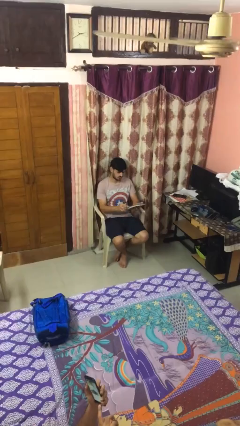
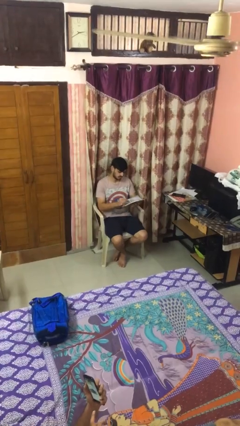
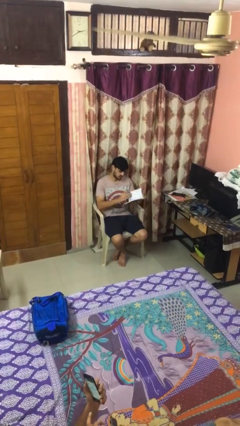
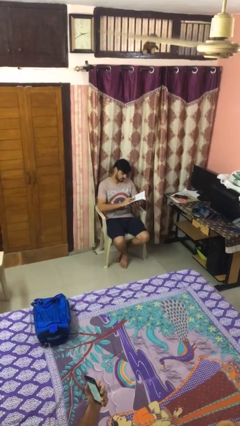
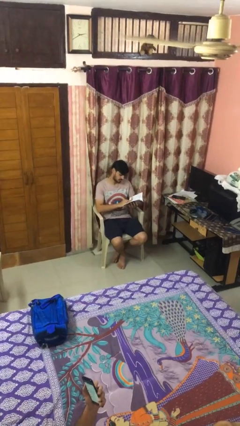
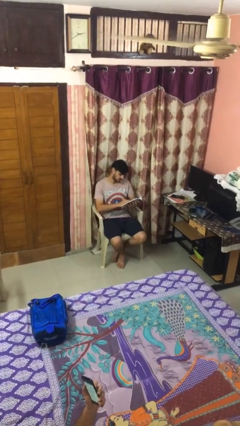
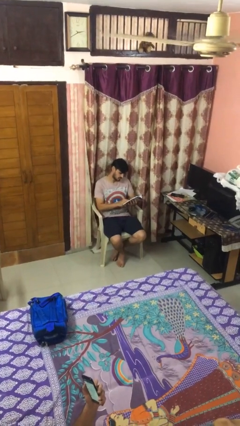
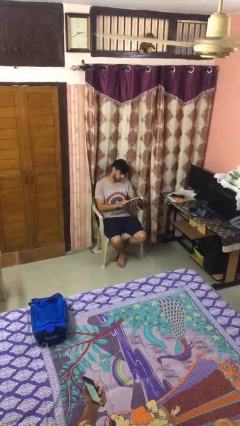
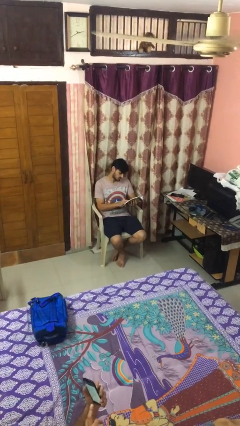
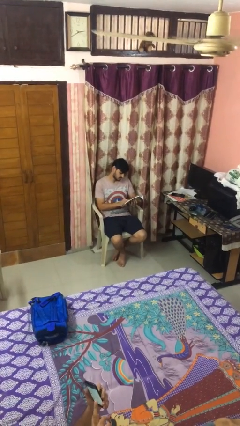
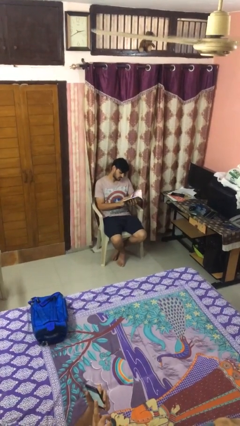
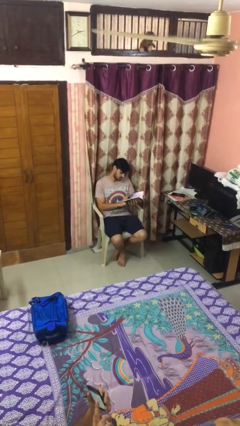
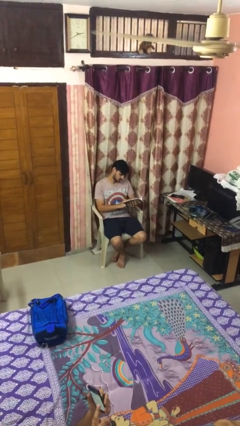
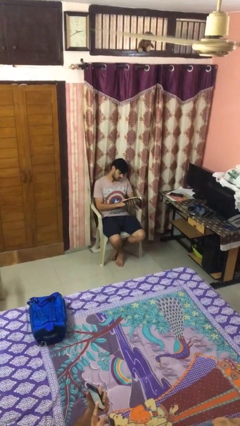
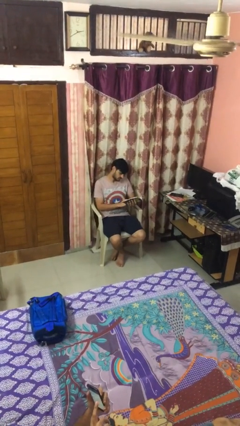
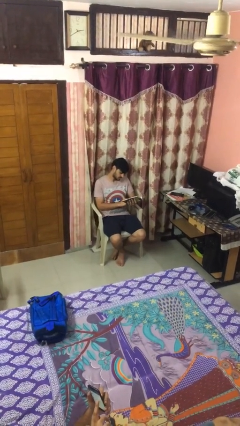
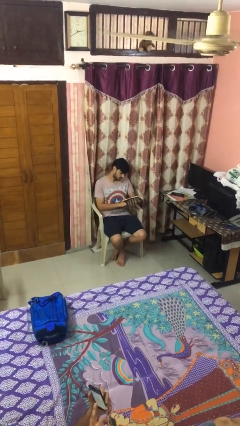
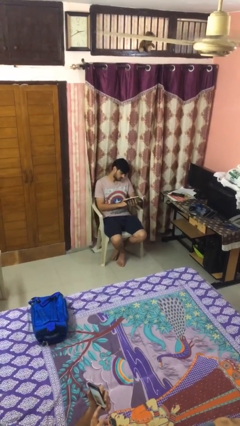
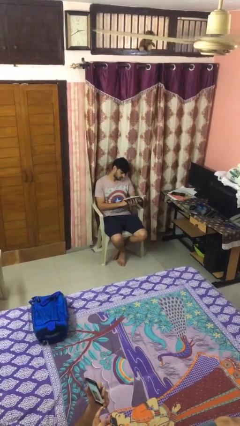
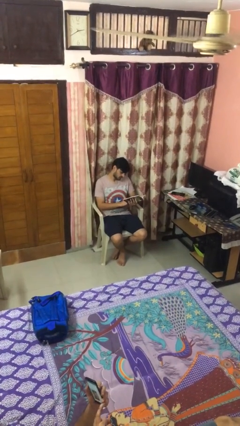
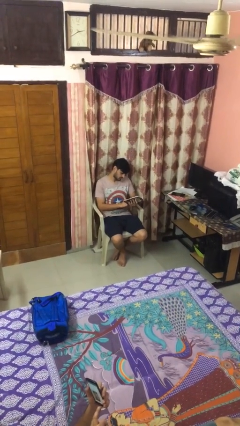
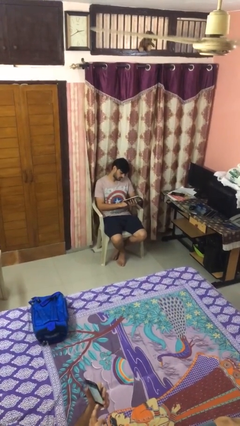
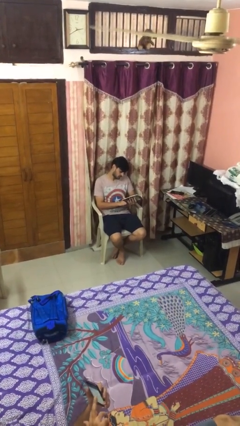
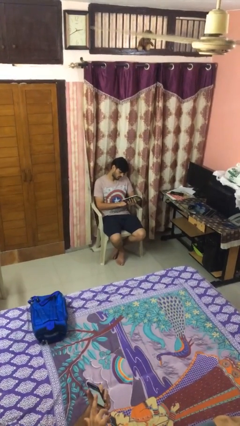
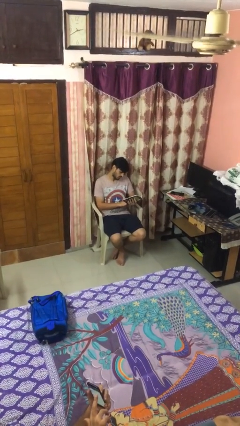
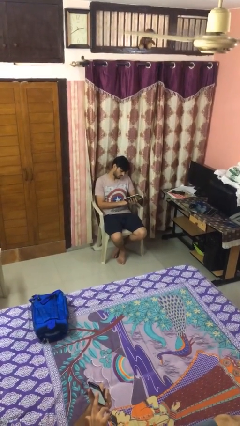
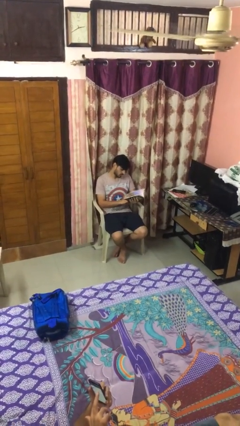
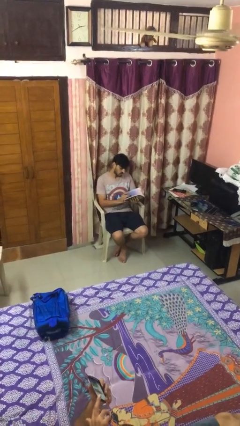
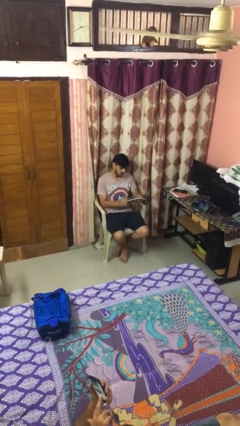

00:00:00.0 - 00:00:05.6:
person reads book

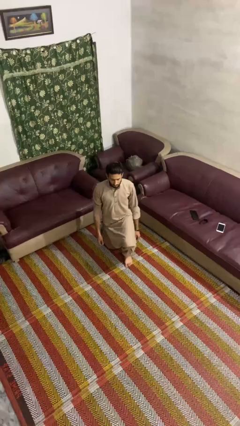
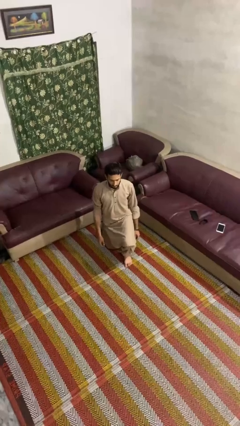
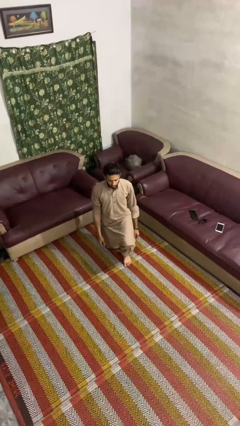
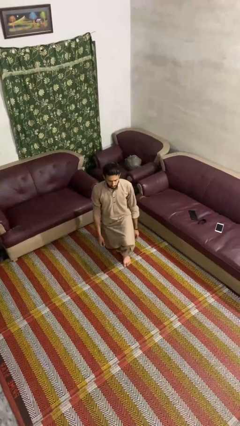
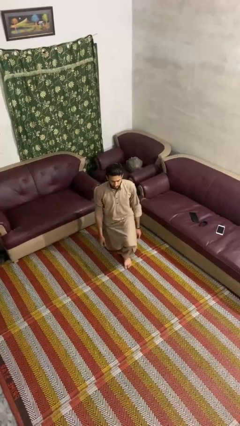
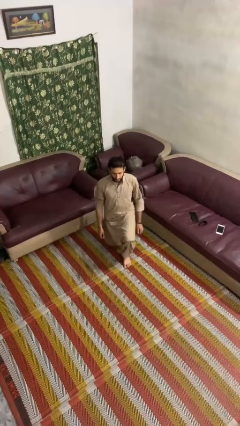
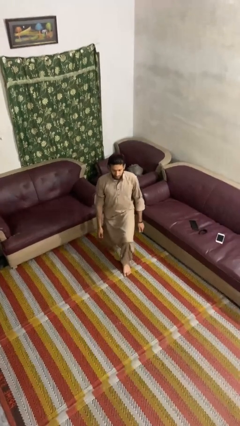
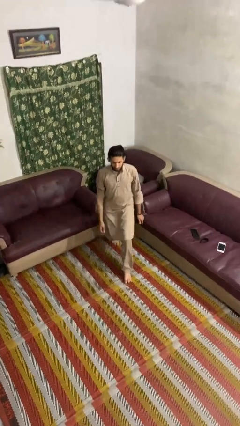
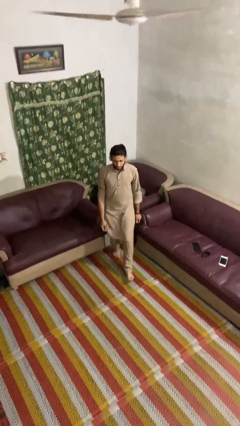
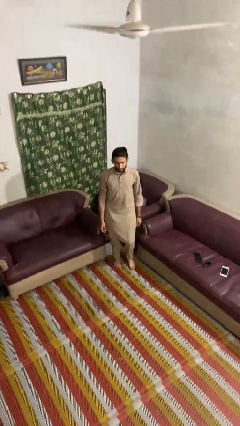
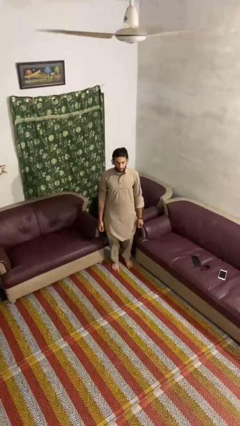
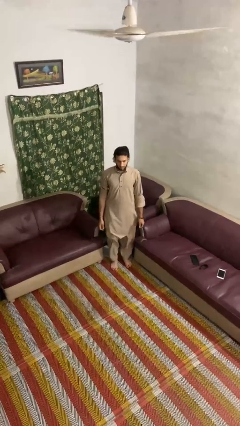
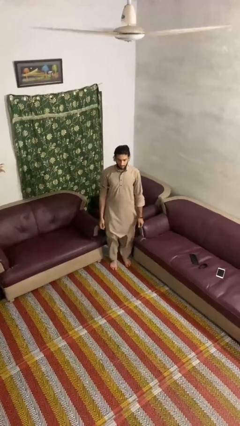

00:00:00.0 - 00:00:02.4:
person stands up from floor

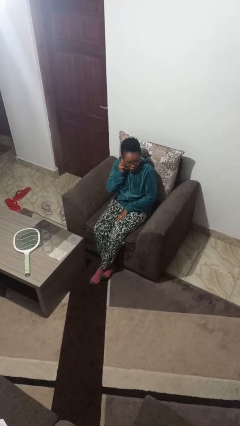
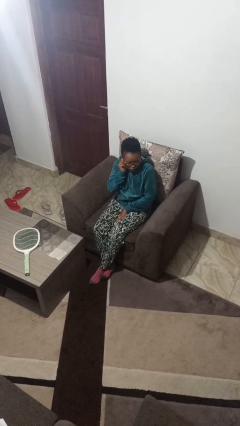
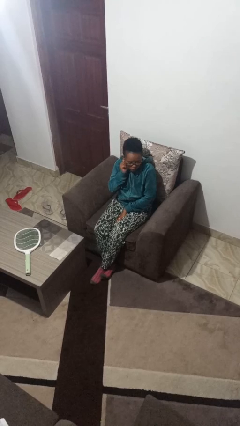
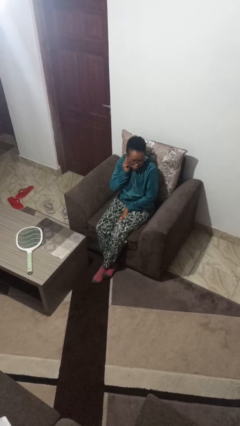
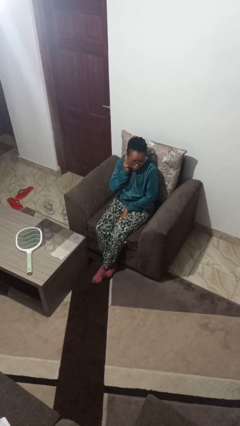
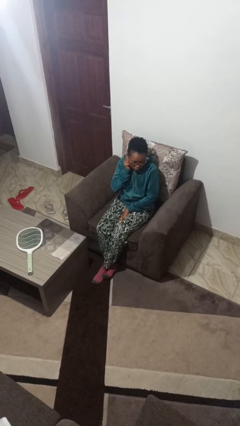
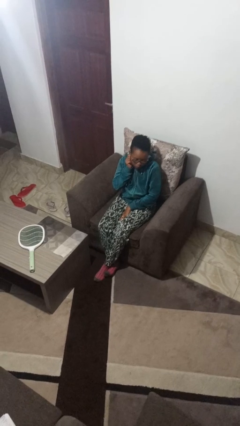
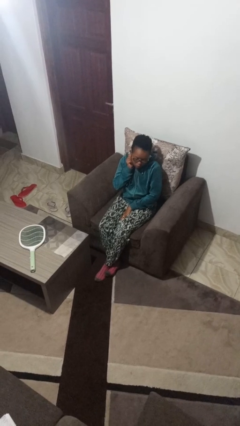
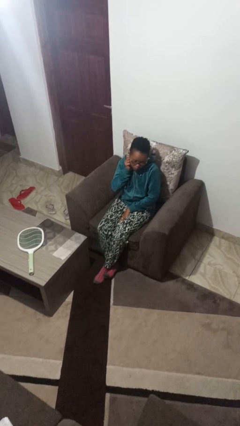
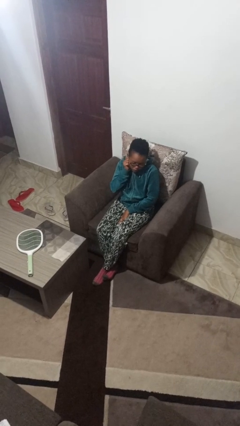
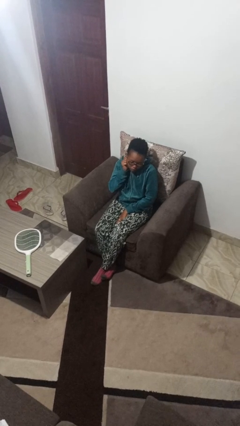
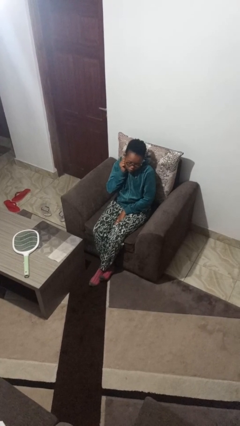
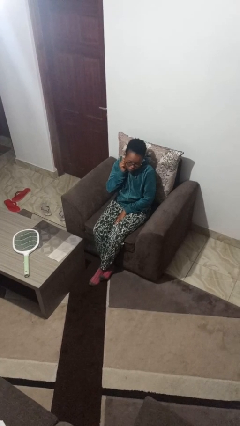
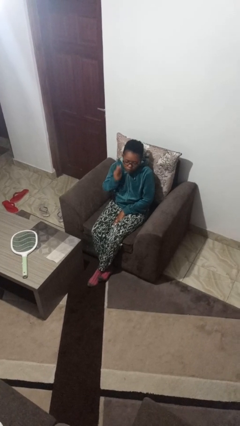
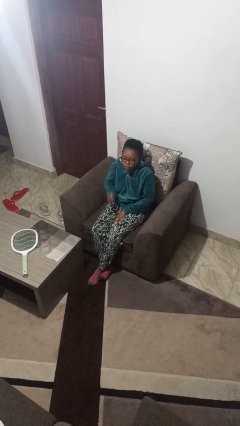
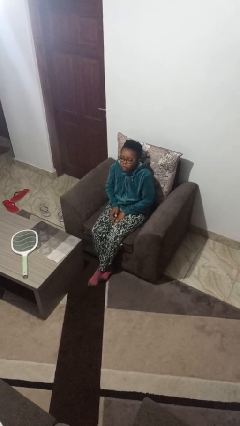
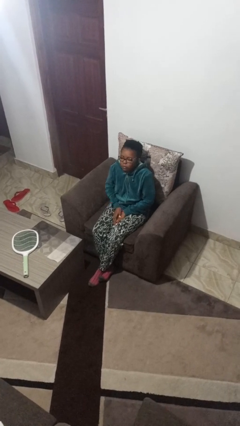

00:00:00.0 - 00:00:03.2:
person touches earlobe

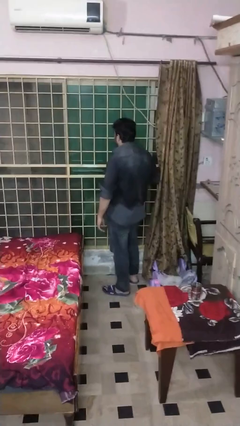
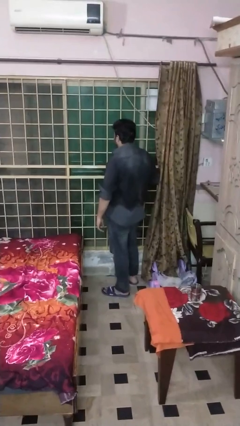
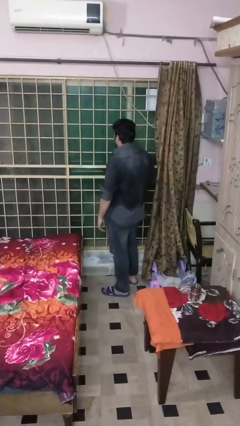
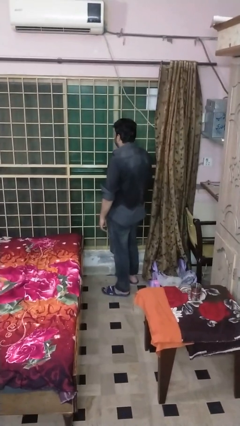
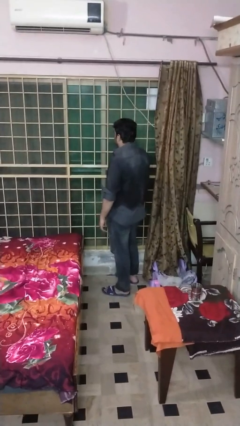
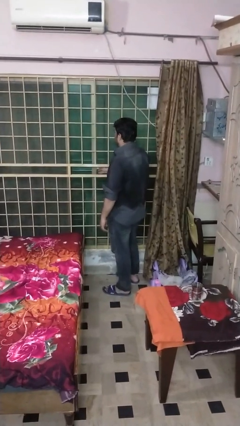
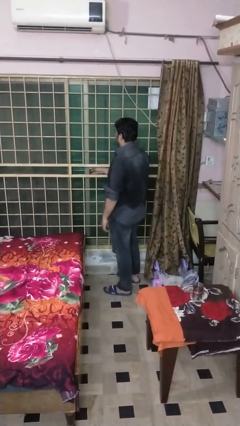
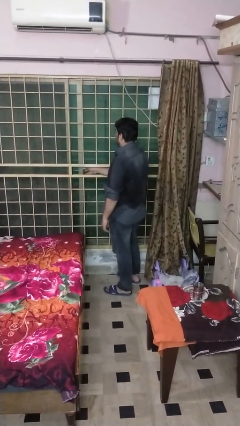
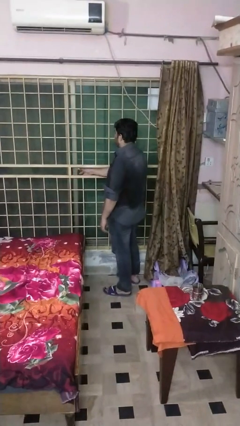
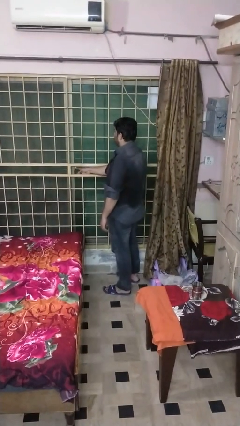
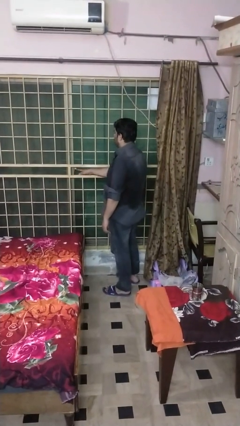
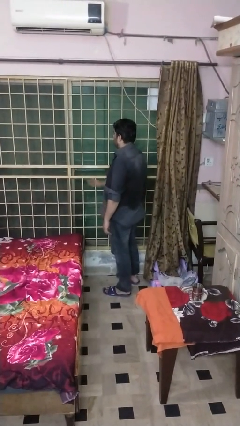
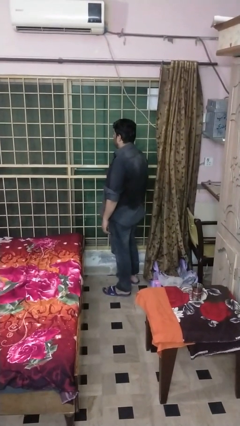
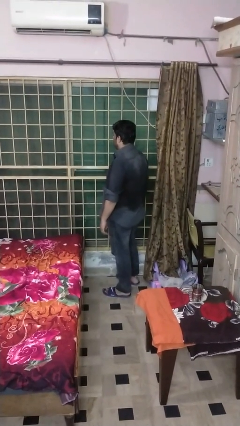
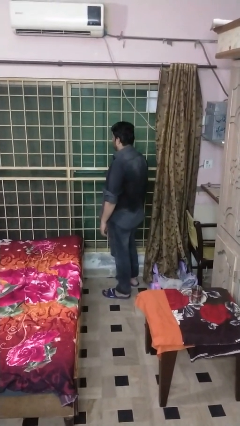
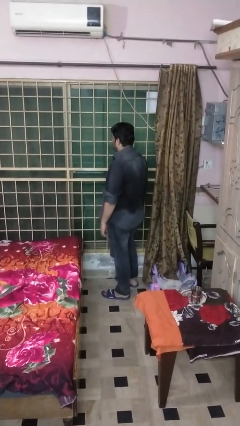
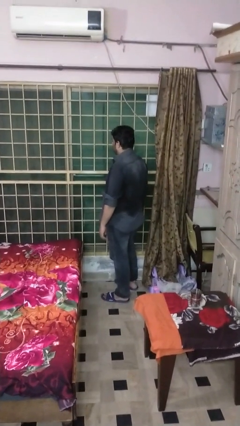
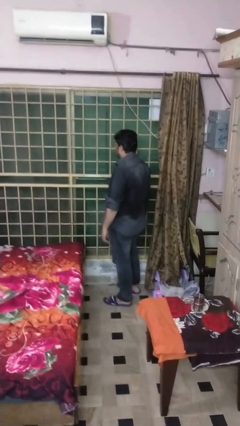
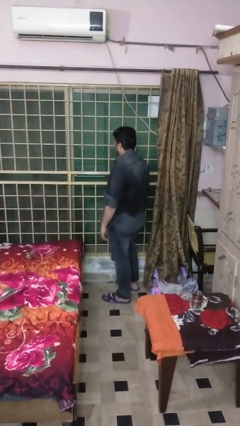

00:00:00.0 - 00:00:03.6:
person closes sliding door

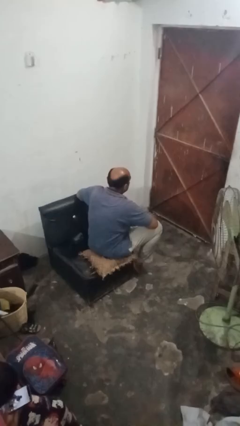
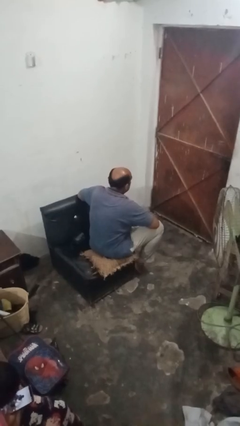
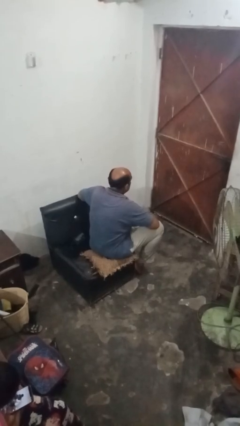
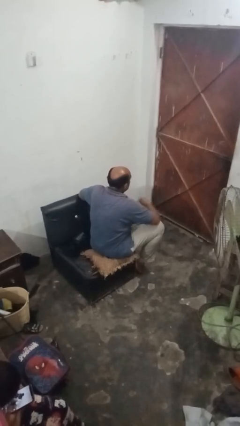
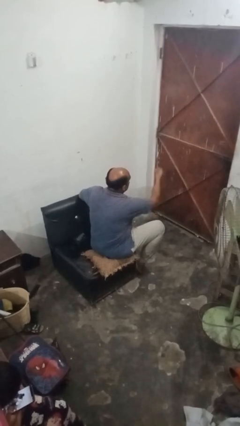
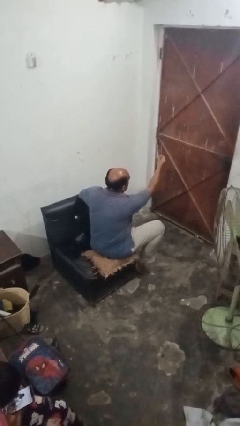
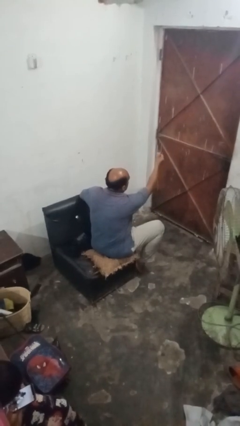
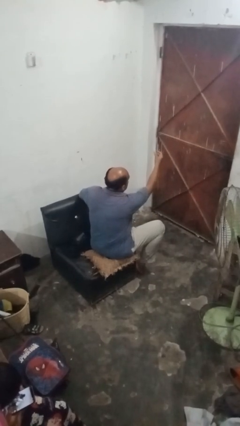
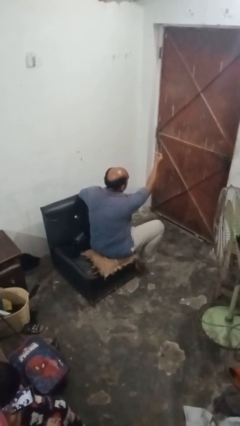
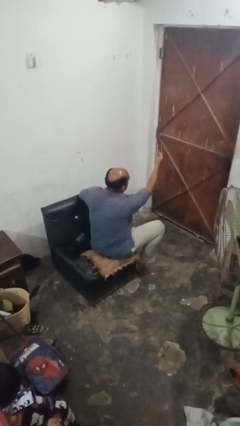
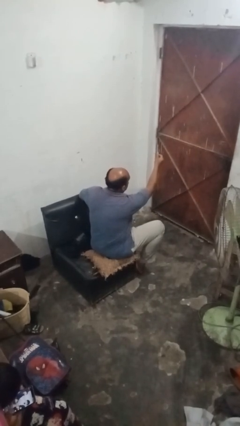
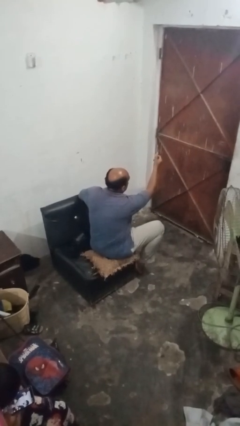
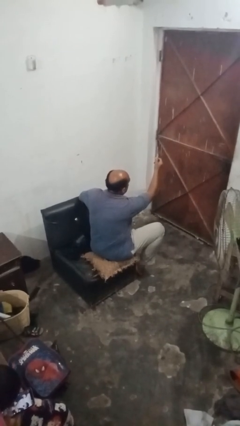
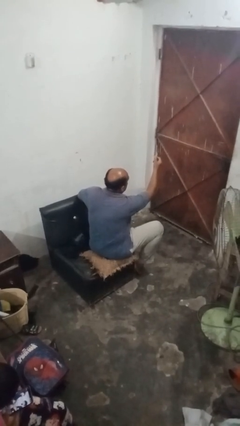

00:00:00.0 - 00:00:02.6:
person snaps fingers
